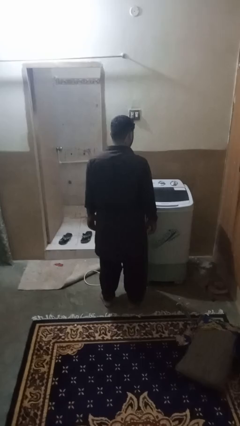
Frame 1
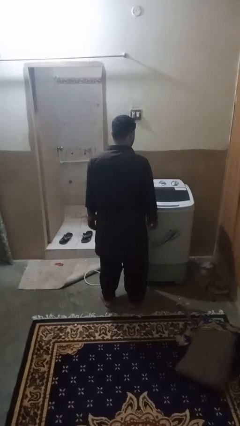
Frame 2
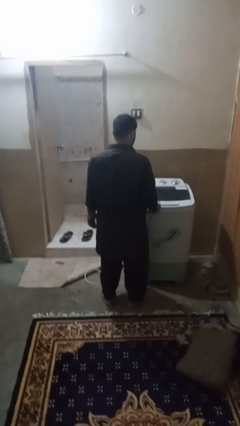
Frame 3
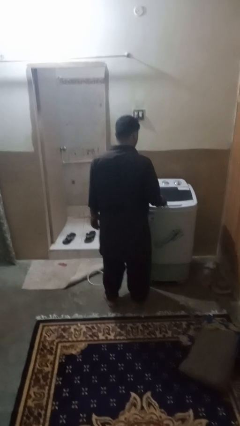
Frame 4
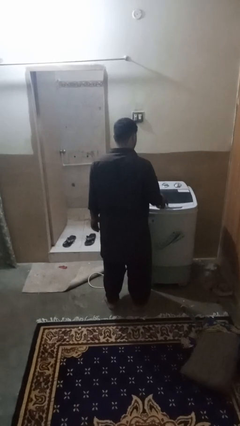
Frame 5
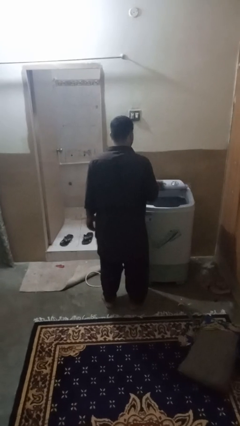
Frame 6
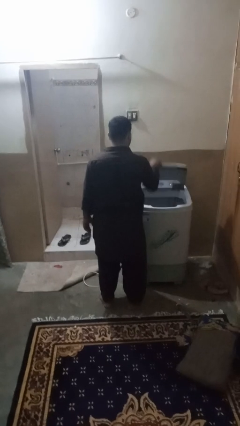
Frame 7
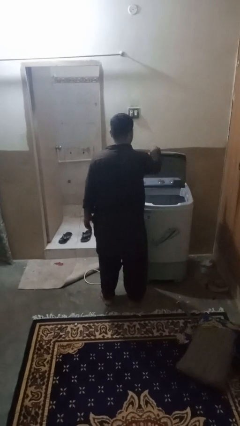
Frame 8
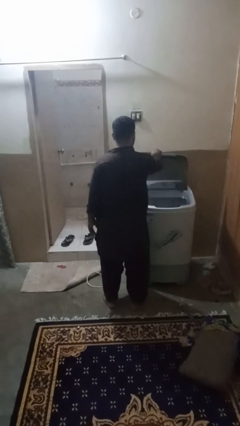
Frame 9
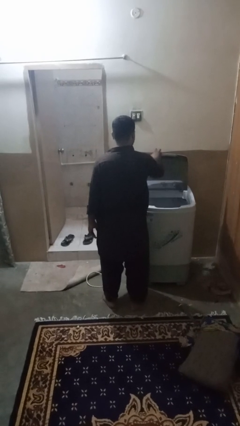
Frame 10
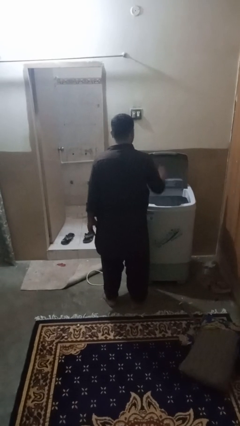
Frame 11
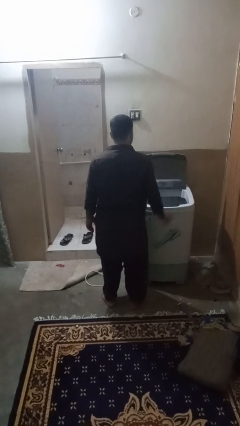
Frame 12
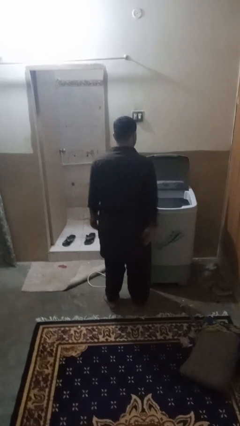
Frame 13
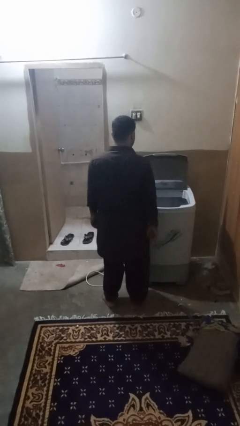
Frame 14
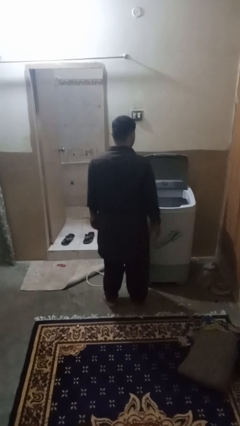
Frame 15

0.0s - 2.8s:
person opens clothes washer

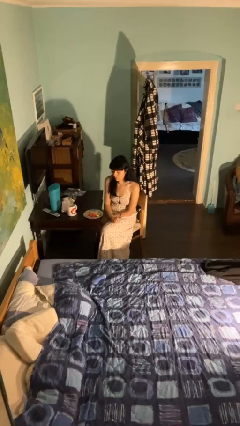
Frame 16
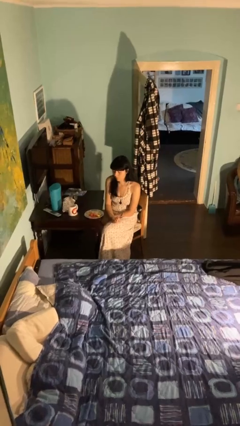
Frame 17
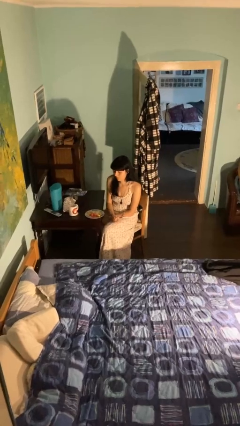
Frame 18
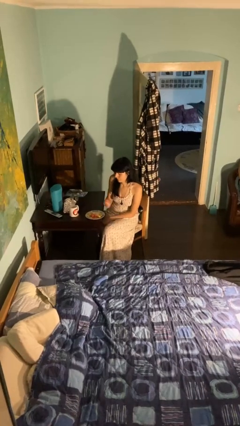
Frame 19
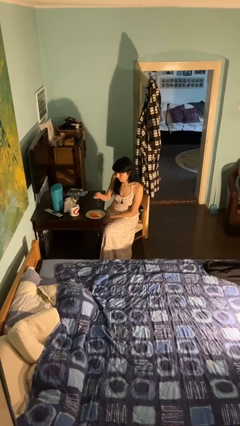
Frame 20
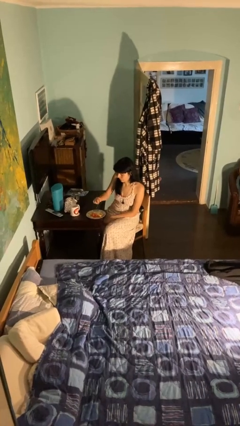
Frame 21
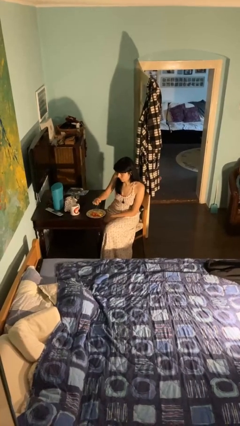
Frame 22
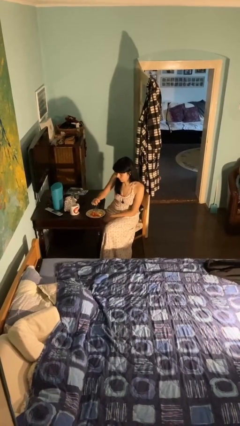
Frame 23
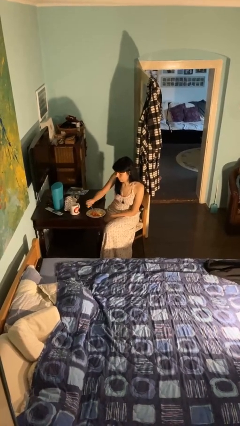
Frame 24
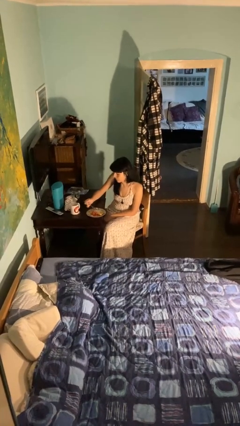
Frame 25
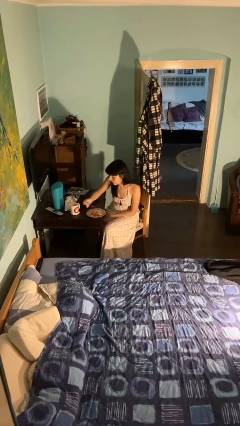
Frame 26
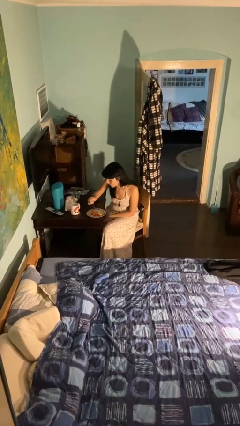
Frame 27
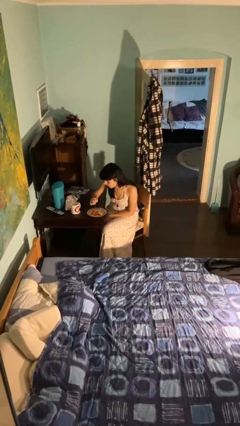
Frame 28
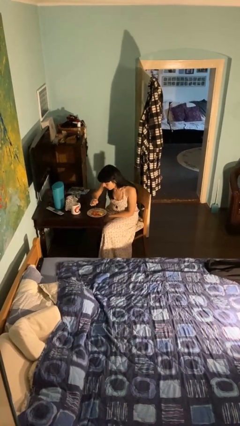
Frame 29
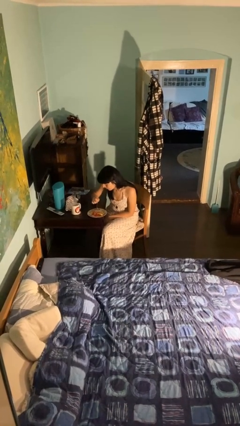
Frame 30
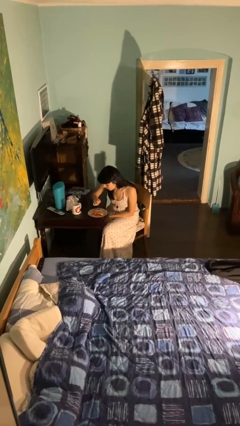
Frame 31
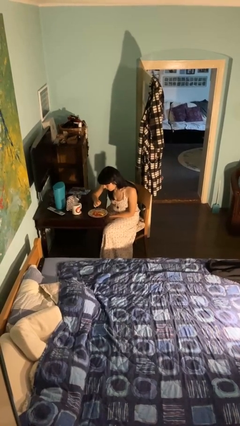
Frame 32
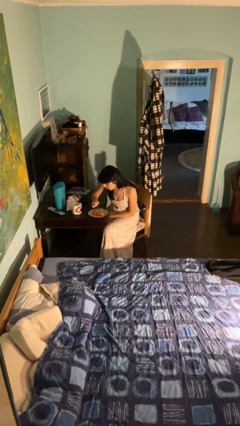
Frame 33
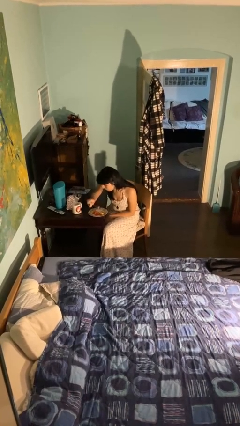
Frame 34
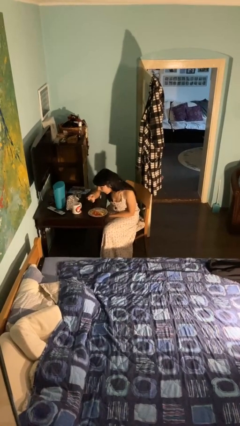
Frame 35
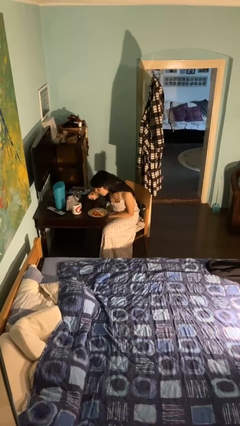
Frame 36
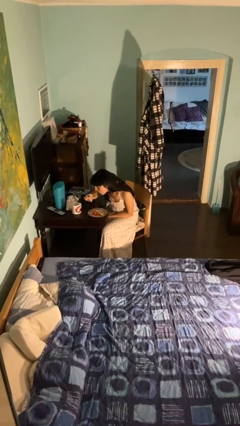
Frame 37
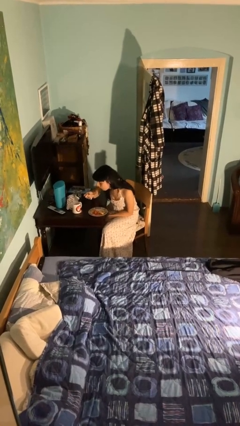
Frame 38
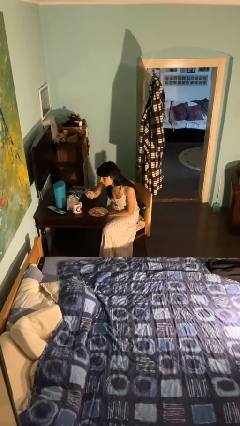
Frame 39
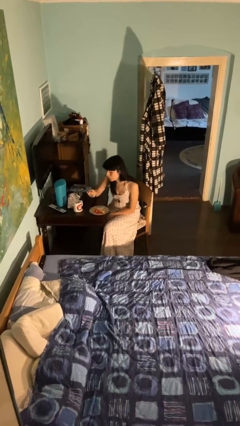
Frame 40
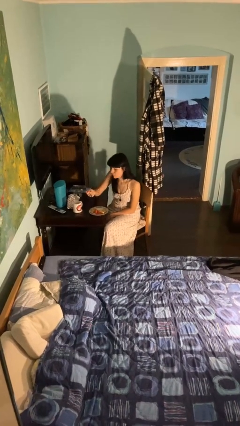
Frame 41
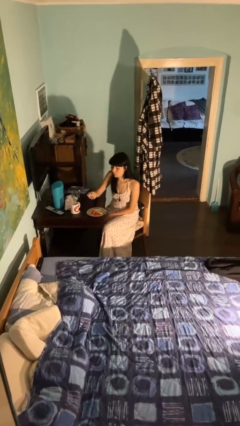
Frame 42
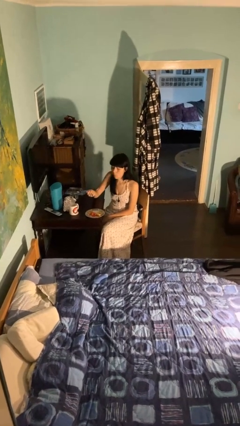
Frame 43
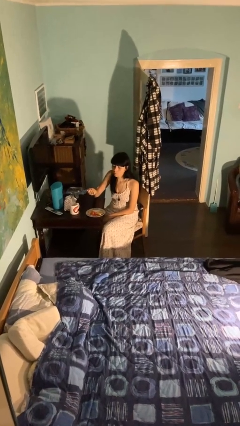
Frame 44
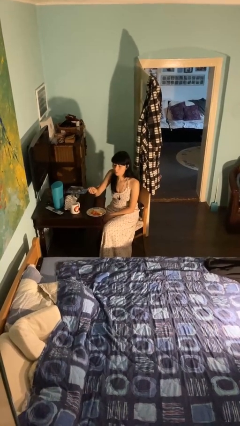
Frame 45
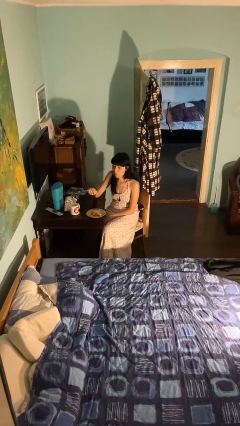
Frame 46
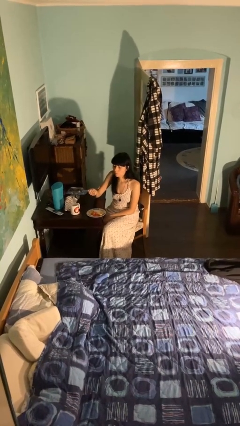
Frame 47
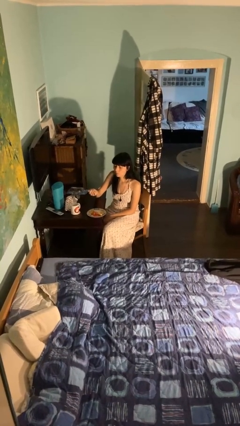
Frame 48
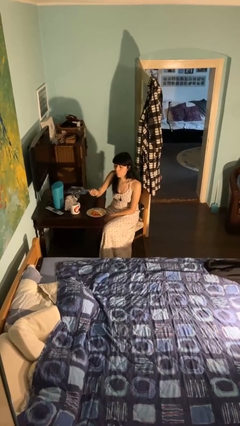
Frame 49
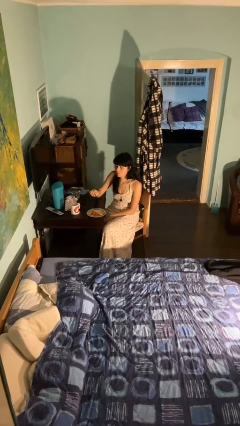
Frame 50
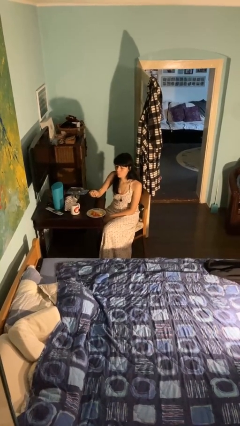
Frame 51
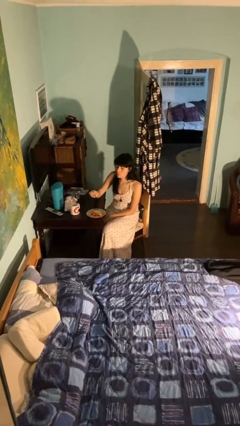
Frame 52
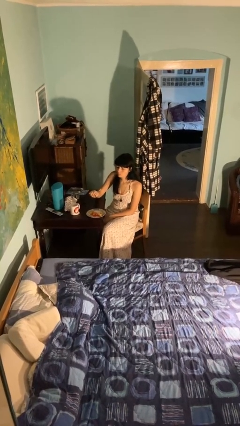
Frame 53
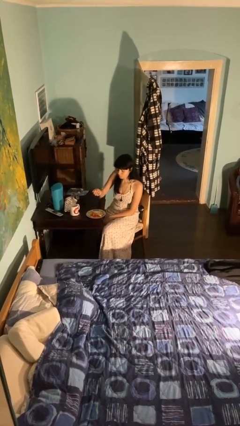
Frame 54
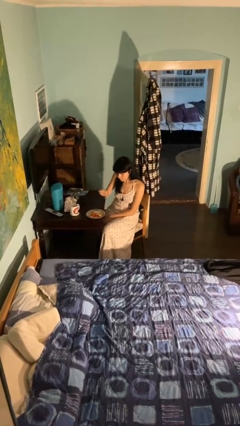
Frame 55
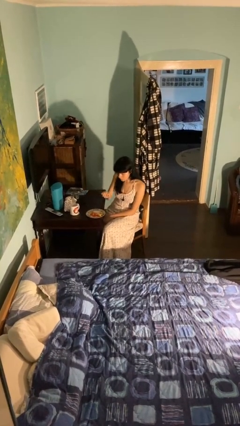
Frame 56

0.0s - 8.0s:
person eats with utensil

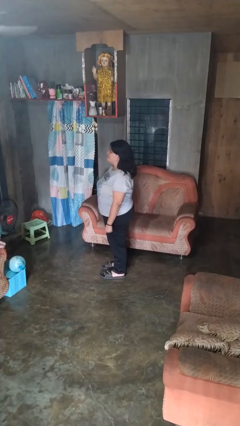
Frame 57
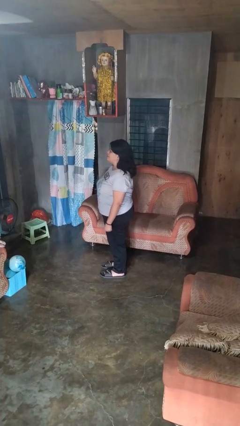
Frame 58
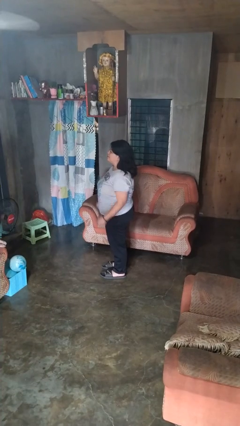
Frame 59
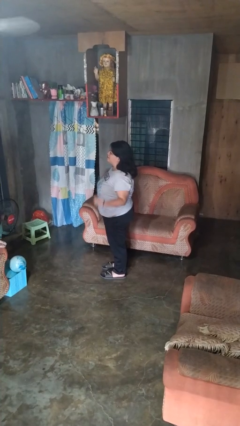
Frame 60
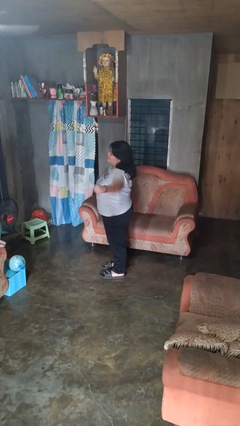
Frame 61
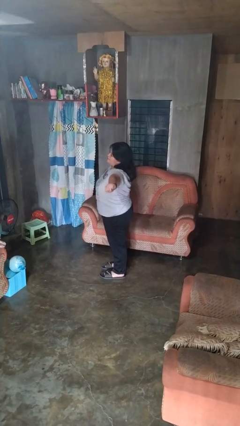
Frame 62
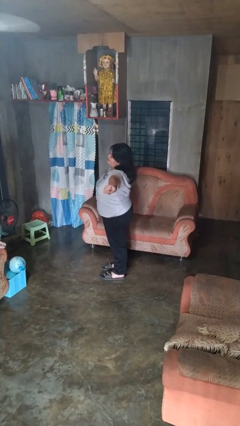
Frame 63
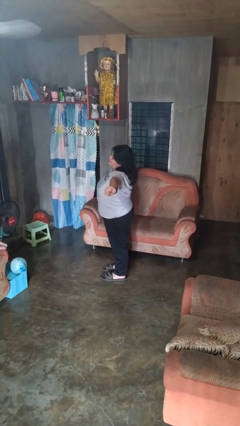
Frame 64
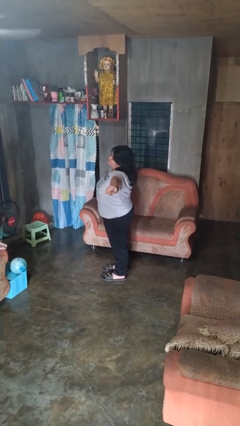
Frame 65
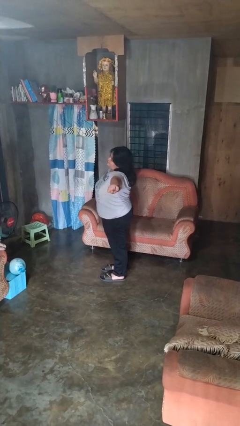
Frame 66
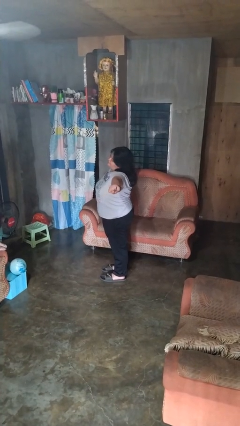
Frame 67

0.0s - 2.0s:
person stretches arms to side

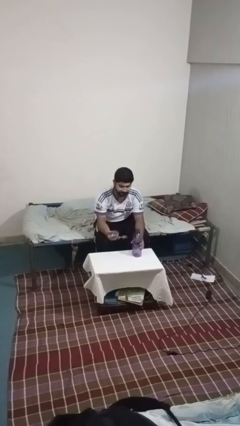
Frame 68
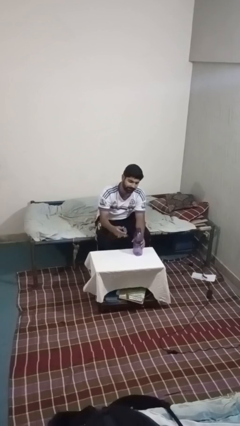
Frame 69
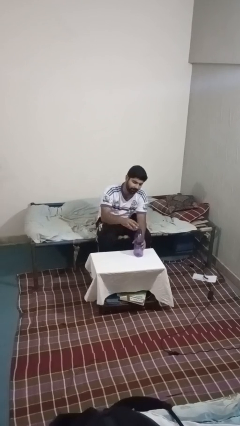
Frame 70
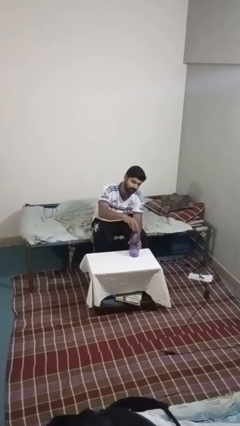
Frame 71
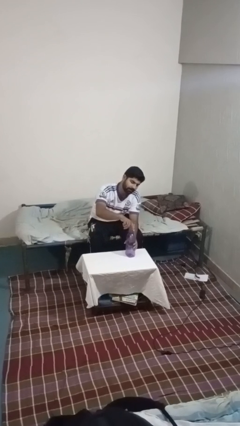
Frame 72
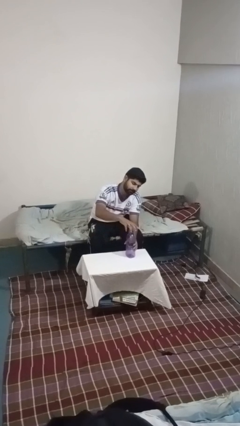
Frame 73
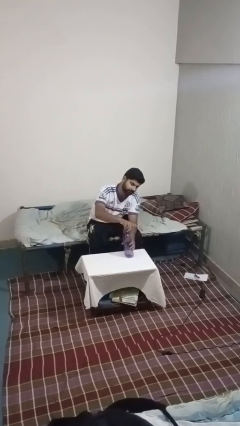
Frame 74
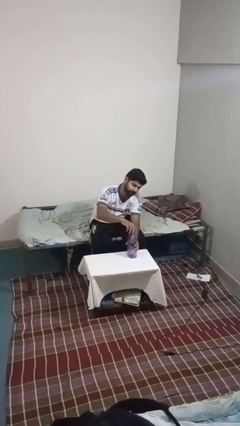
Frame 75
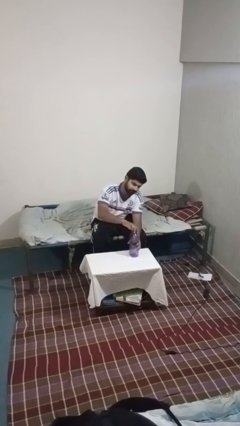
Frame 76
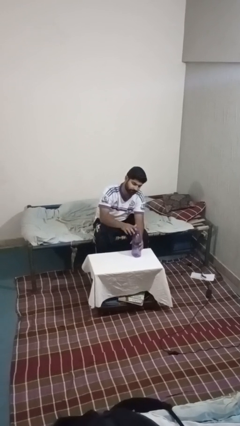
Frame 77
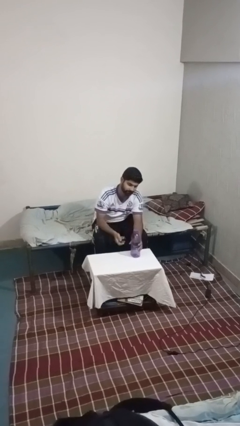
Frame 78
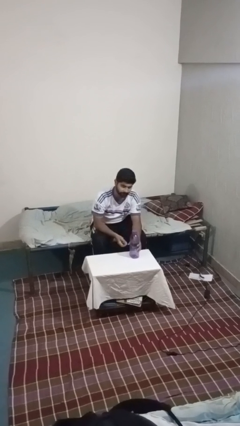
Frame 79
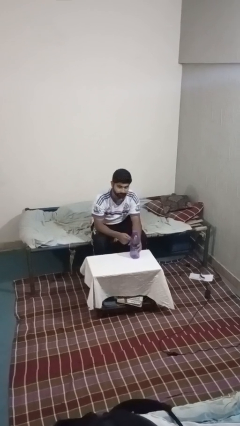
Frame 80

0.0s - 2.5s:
person screws lid to bottle

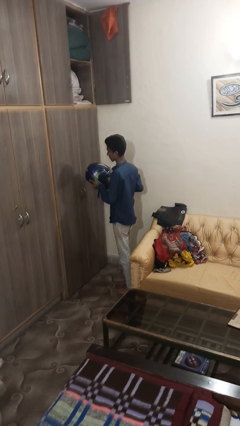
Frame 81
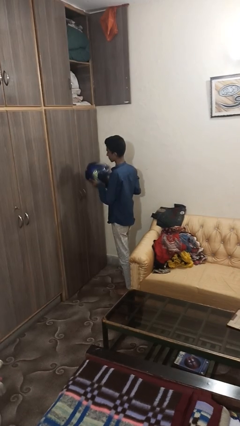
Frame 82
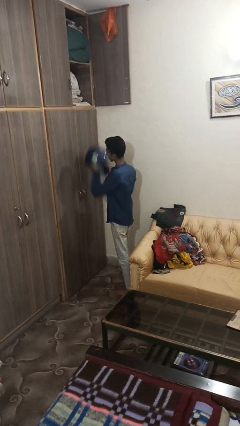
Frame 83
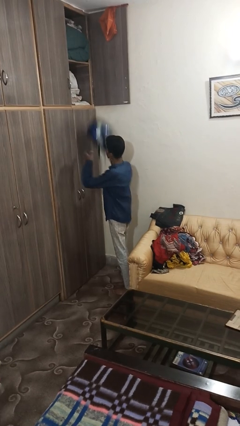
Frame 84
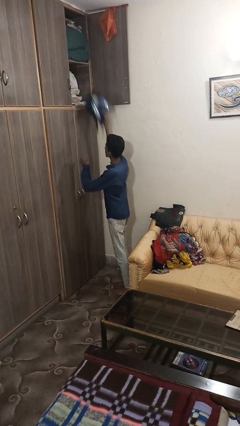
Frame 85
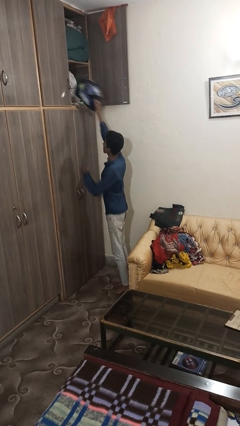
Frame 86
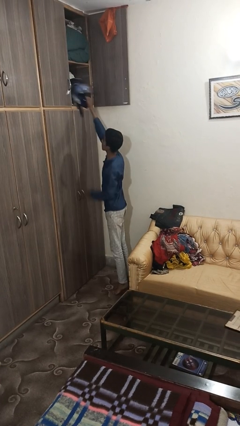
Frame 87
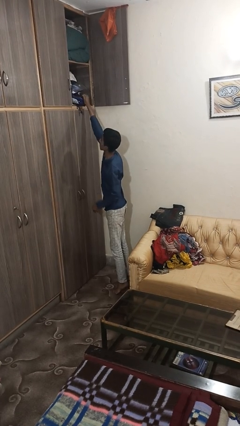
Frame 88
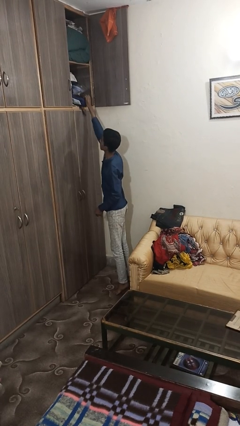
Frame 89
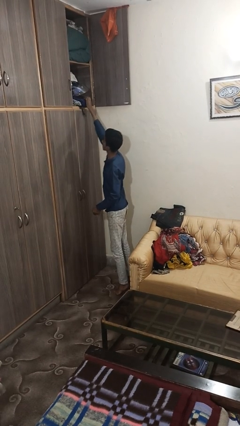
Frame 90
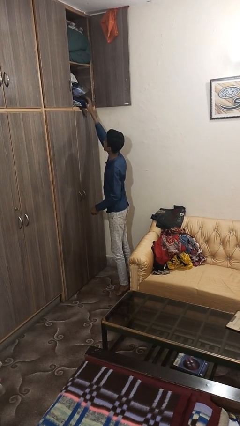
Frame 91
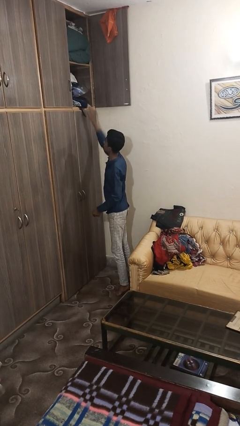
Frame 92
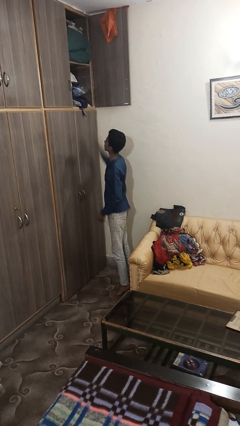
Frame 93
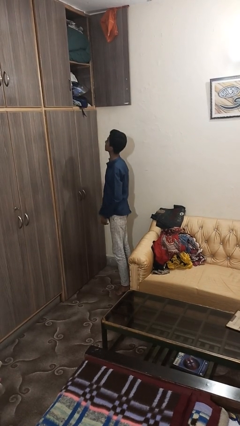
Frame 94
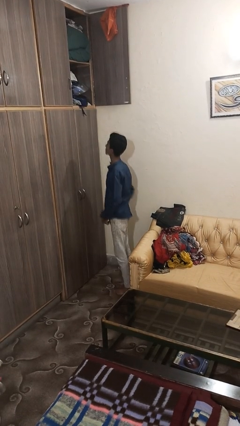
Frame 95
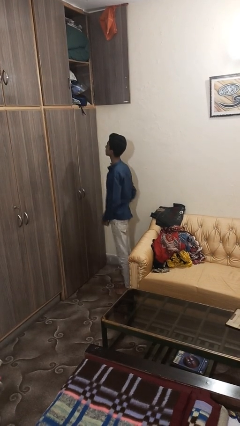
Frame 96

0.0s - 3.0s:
person puts down object on shelf
